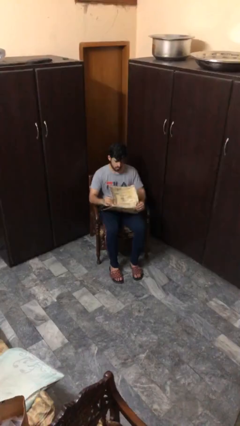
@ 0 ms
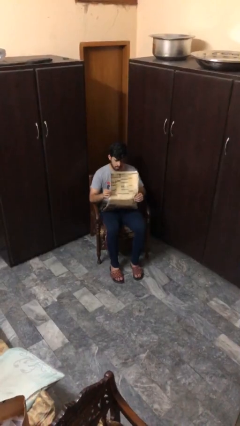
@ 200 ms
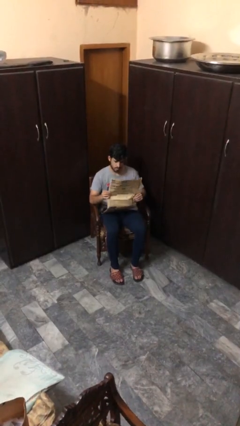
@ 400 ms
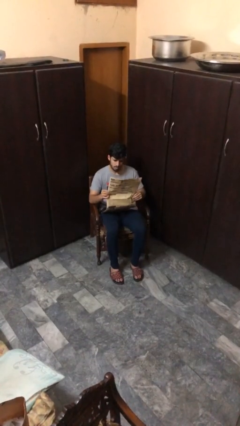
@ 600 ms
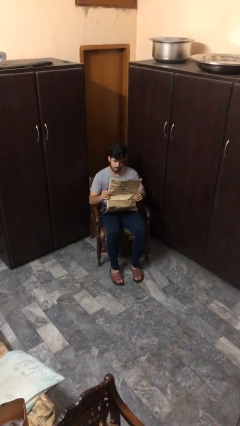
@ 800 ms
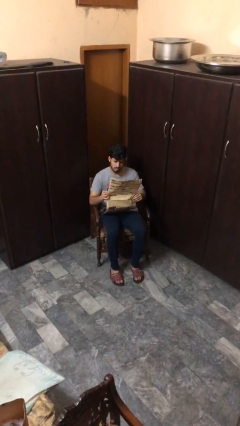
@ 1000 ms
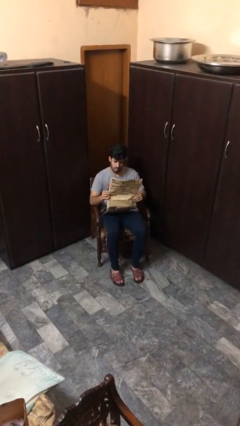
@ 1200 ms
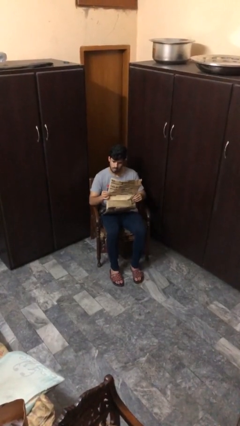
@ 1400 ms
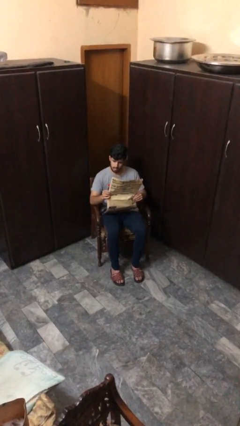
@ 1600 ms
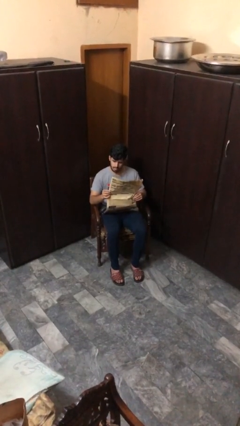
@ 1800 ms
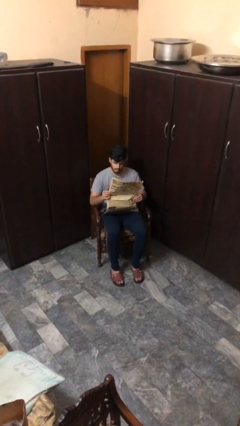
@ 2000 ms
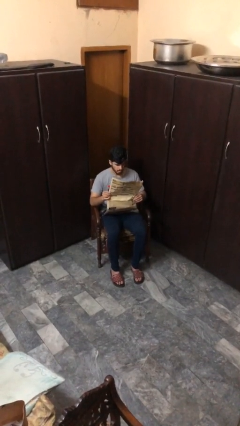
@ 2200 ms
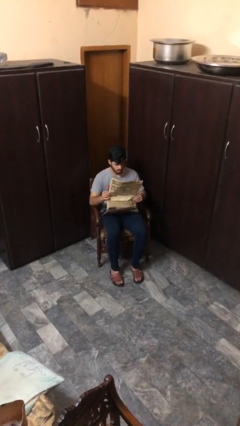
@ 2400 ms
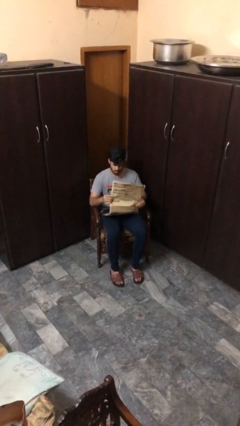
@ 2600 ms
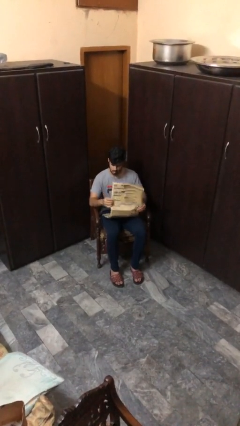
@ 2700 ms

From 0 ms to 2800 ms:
person reads newspaper

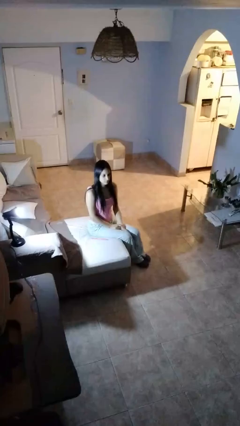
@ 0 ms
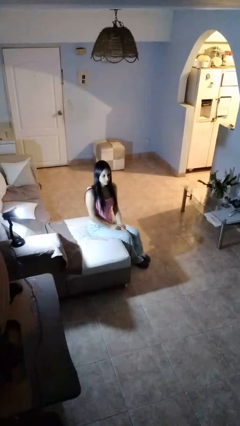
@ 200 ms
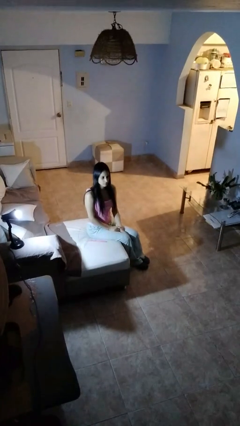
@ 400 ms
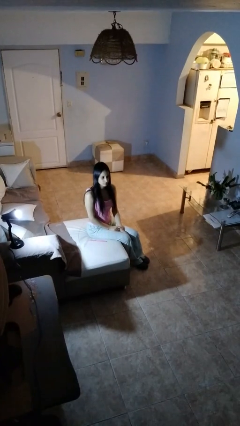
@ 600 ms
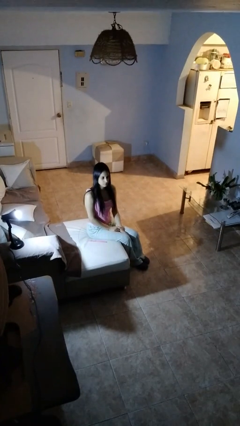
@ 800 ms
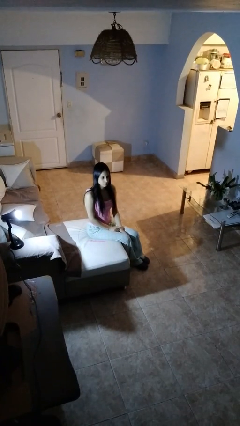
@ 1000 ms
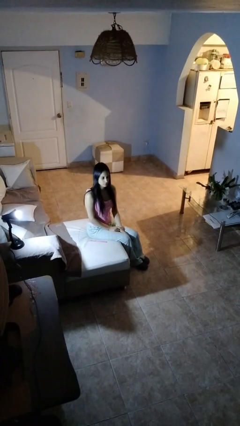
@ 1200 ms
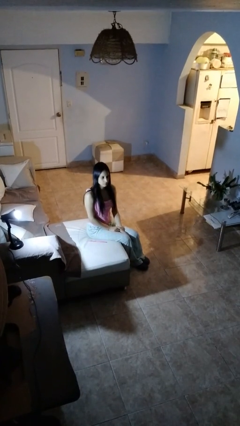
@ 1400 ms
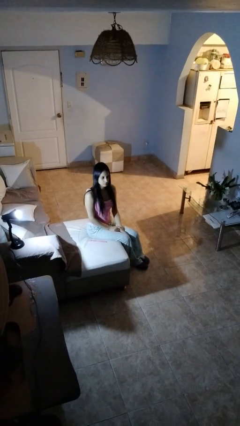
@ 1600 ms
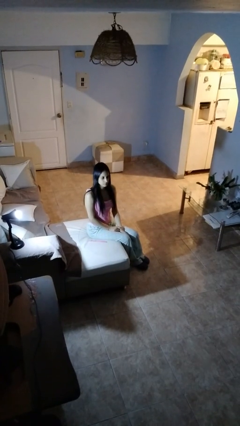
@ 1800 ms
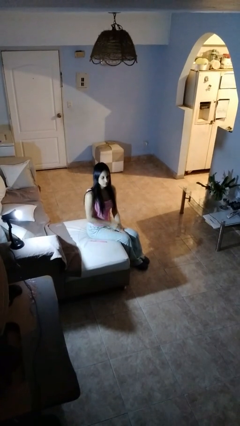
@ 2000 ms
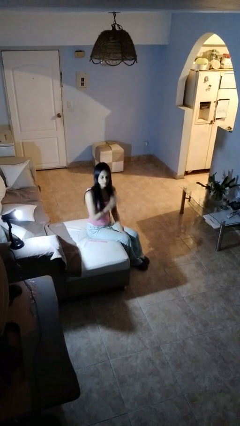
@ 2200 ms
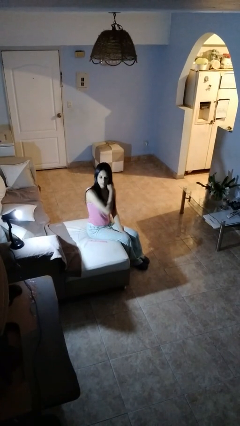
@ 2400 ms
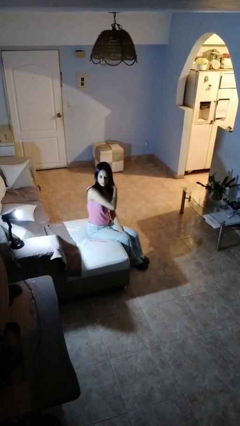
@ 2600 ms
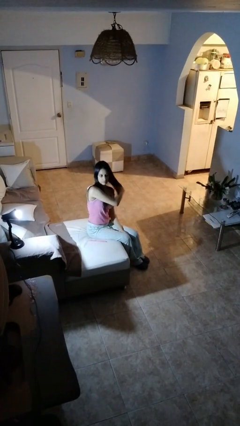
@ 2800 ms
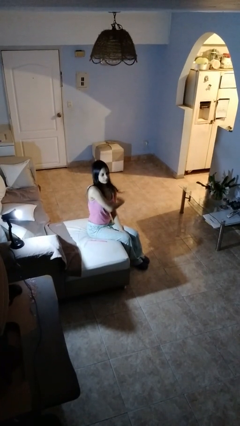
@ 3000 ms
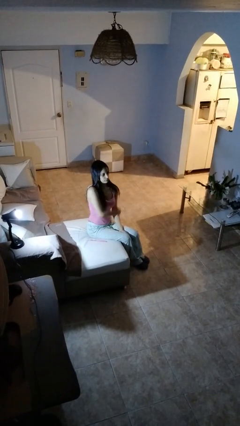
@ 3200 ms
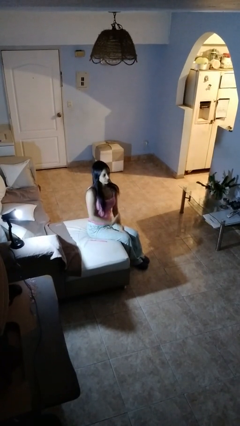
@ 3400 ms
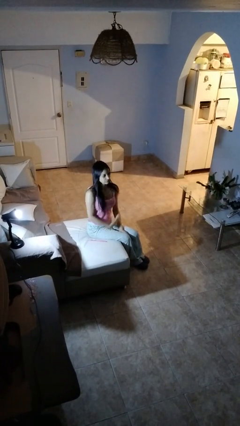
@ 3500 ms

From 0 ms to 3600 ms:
person strokes hair

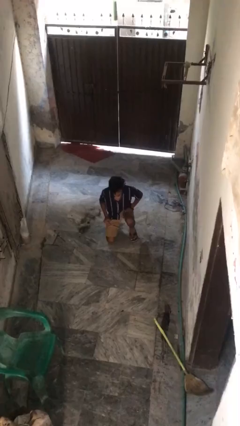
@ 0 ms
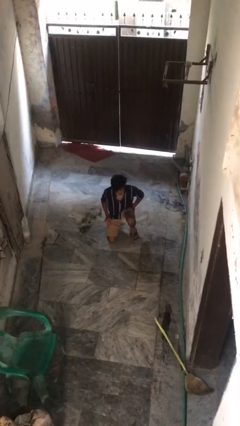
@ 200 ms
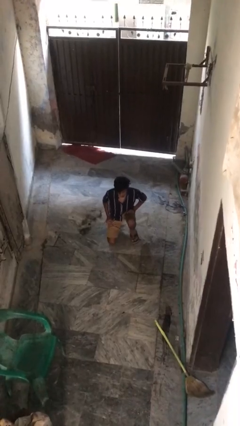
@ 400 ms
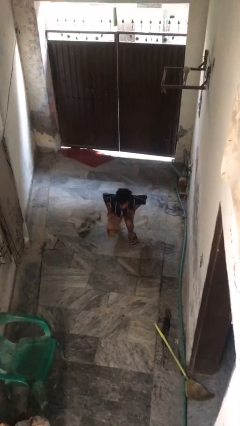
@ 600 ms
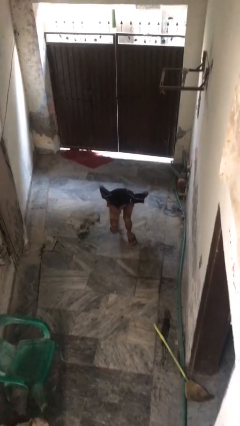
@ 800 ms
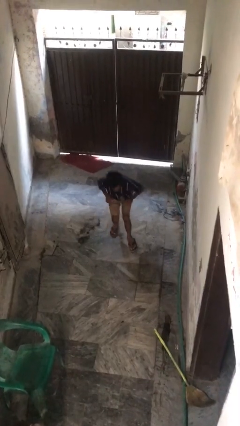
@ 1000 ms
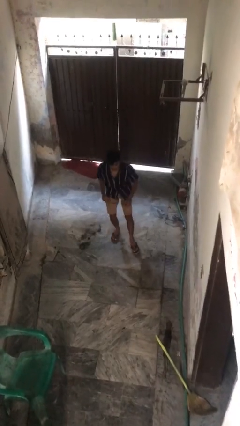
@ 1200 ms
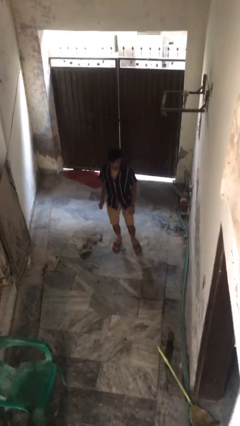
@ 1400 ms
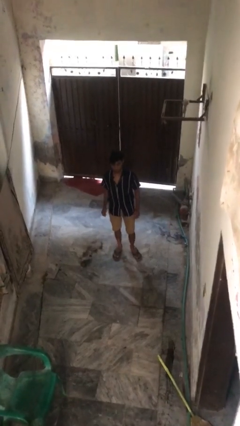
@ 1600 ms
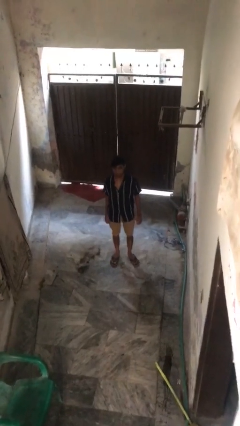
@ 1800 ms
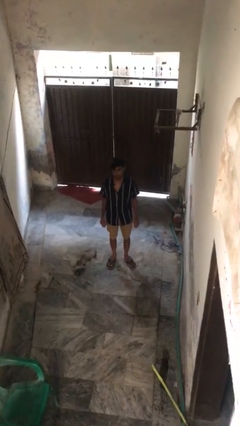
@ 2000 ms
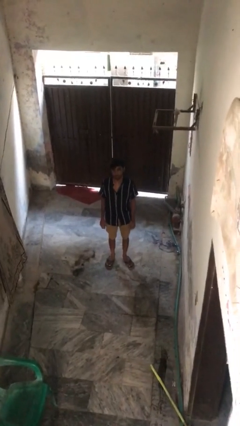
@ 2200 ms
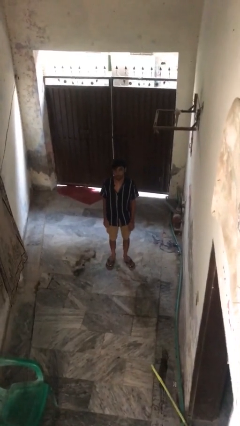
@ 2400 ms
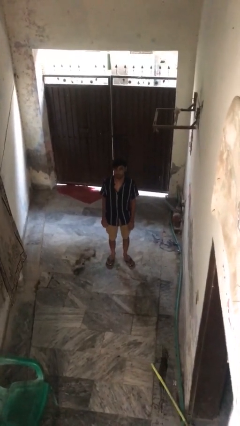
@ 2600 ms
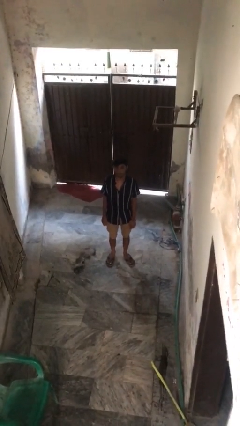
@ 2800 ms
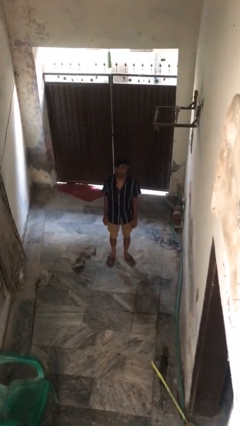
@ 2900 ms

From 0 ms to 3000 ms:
person stands up from floor

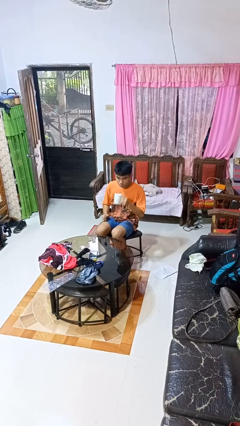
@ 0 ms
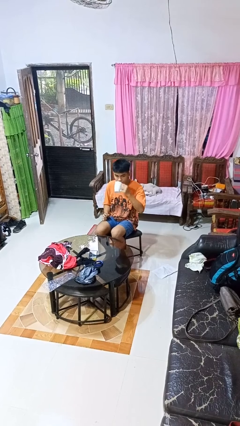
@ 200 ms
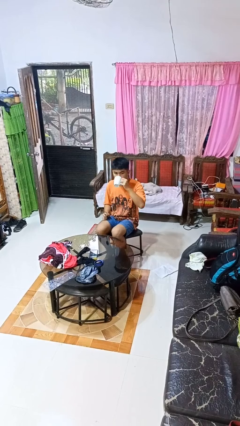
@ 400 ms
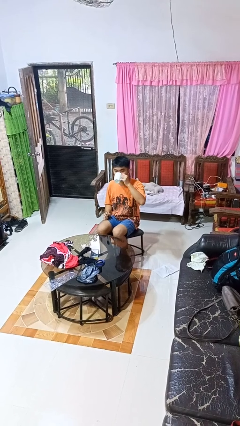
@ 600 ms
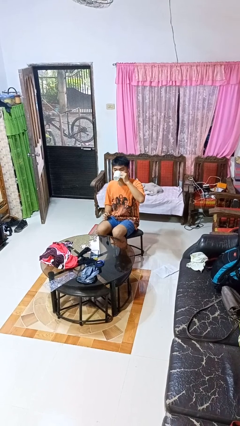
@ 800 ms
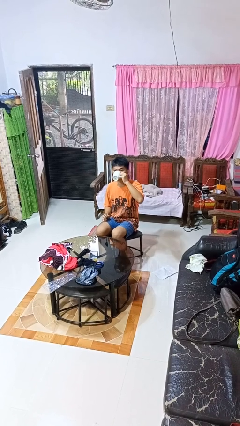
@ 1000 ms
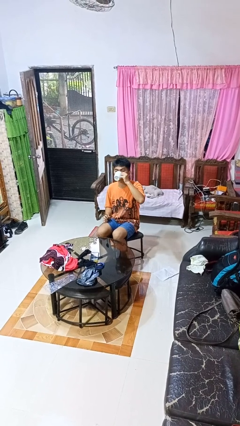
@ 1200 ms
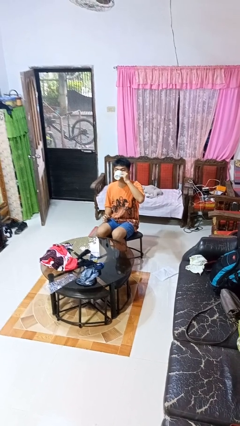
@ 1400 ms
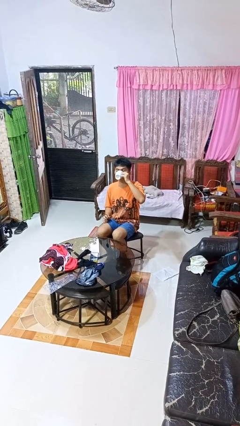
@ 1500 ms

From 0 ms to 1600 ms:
person drinks from mug

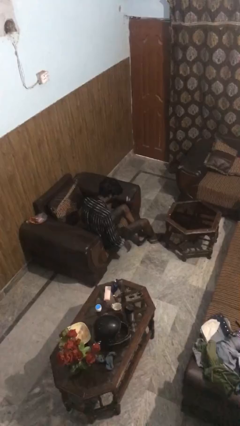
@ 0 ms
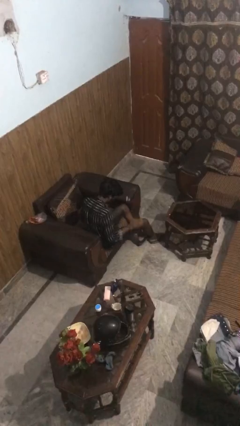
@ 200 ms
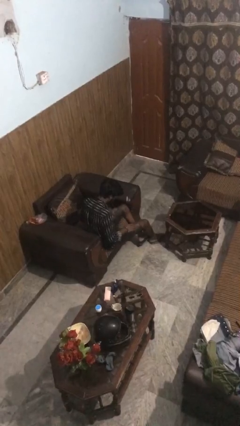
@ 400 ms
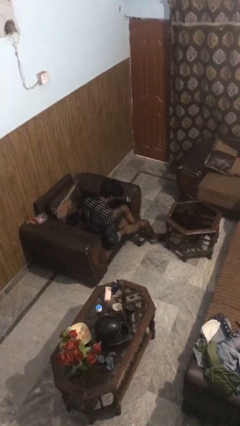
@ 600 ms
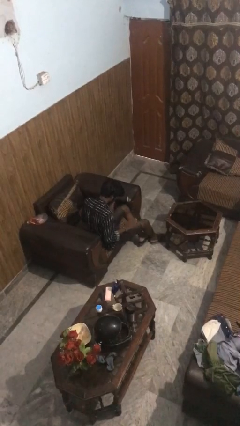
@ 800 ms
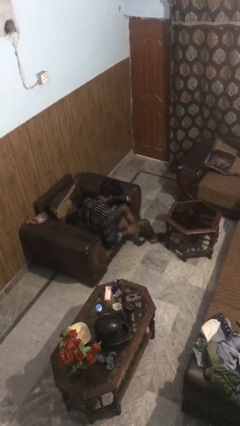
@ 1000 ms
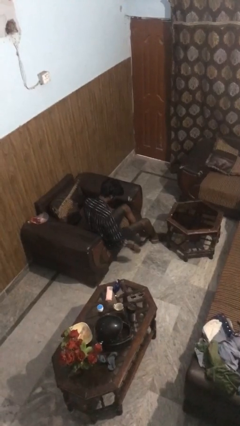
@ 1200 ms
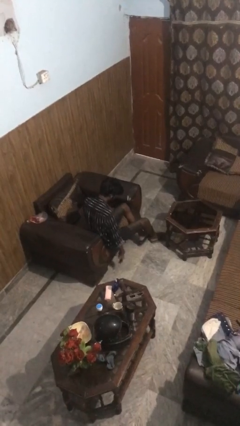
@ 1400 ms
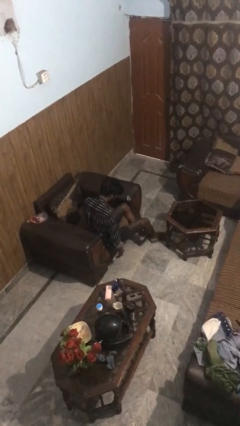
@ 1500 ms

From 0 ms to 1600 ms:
person slaps hands on thighs

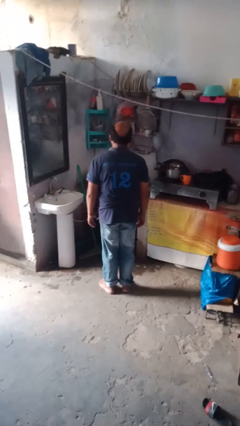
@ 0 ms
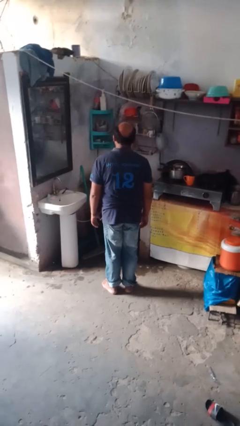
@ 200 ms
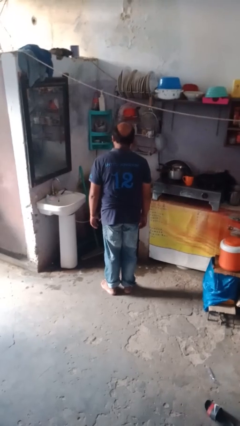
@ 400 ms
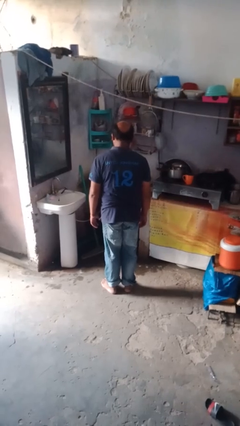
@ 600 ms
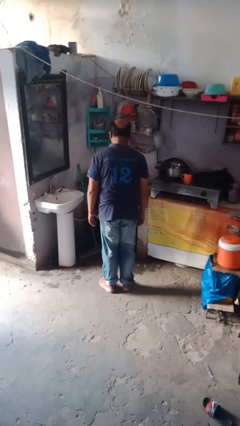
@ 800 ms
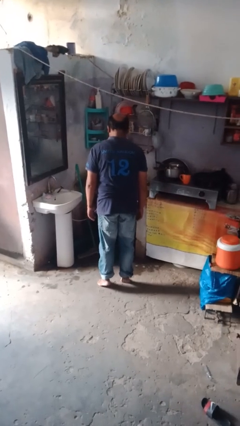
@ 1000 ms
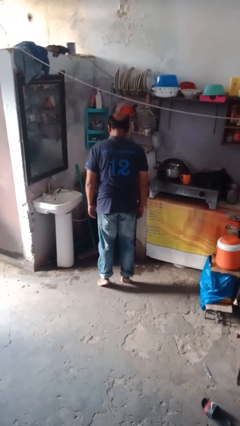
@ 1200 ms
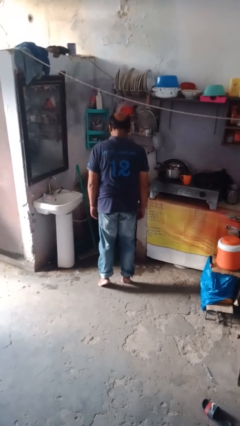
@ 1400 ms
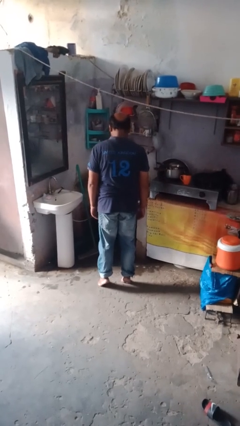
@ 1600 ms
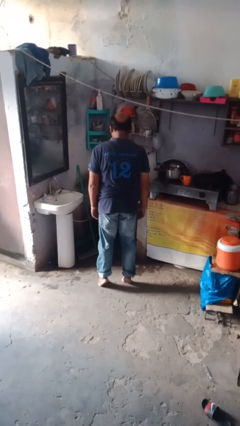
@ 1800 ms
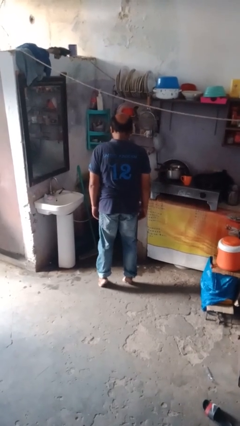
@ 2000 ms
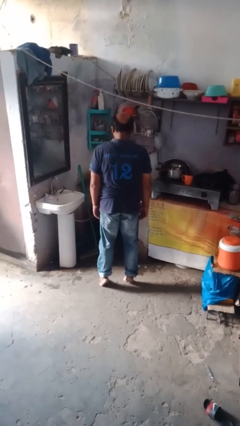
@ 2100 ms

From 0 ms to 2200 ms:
person walks tiptoe

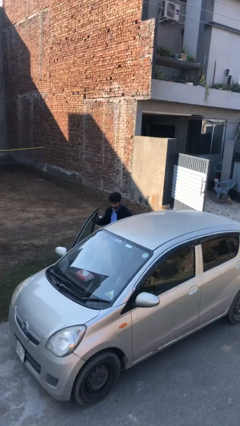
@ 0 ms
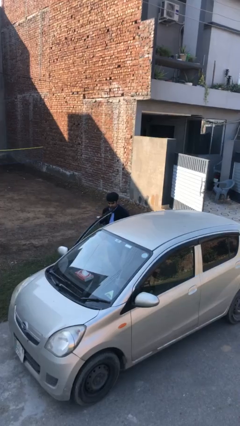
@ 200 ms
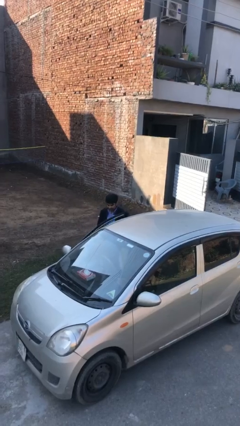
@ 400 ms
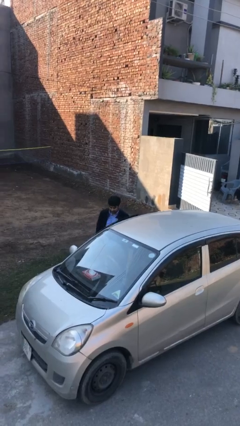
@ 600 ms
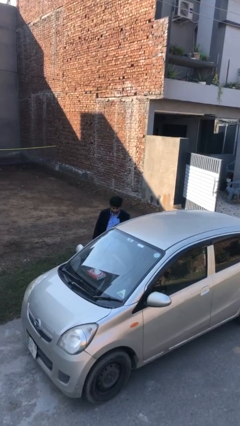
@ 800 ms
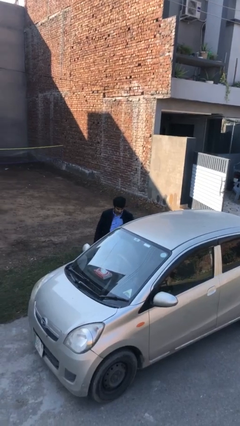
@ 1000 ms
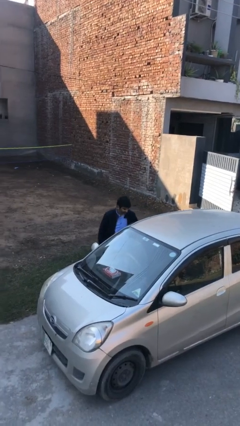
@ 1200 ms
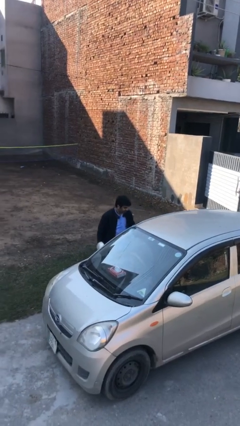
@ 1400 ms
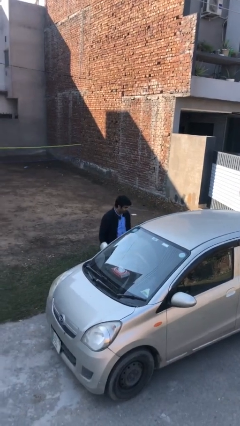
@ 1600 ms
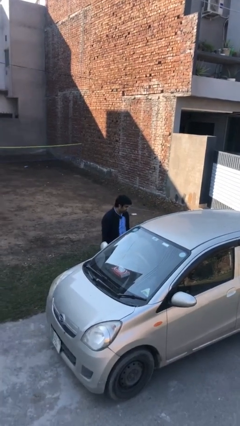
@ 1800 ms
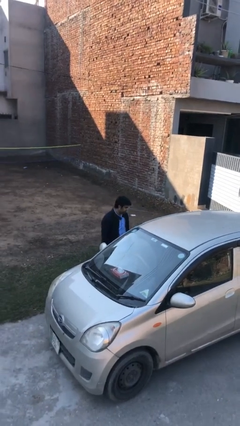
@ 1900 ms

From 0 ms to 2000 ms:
person closes car door
